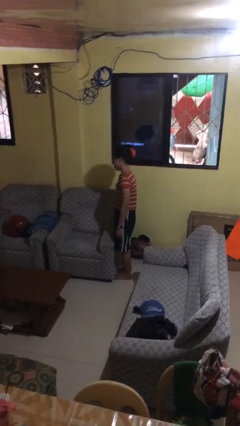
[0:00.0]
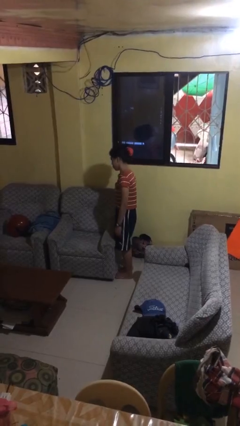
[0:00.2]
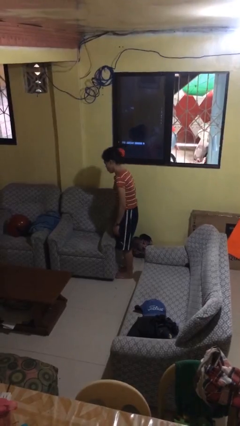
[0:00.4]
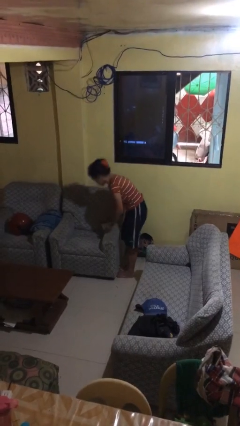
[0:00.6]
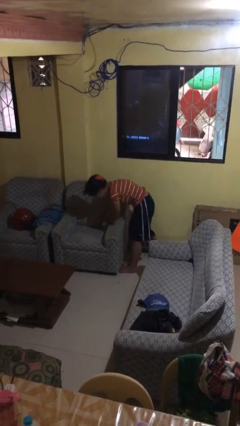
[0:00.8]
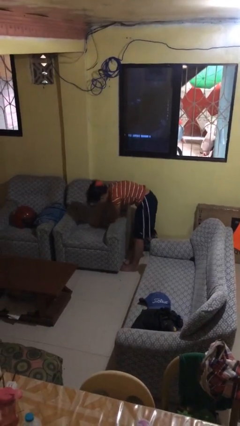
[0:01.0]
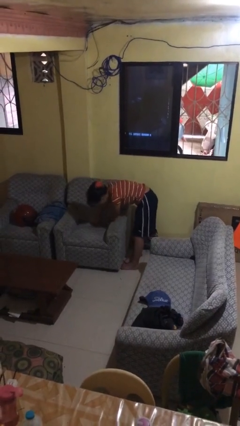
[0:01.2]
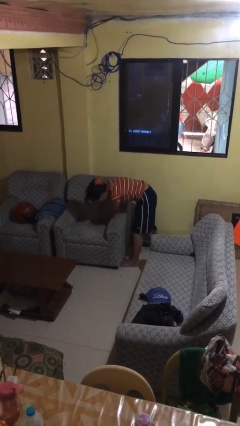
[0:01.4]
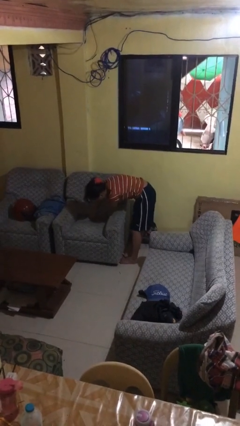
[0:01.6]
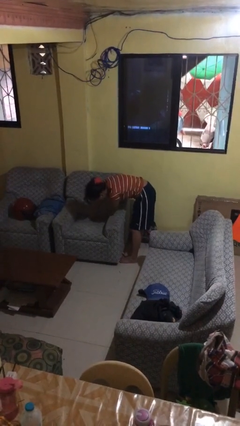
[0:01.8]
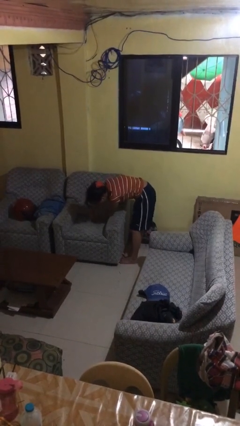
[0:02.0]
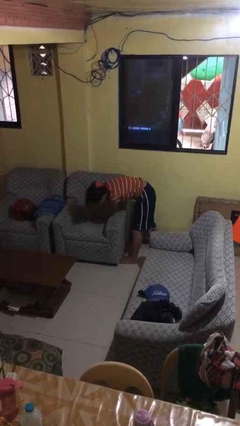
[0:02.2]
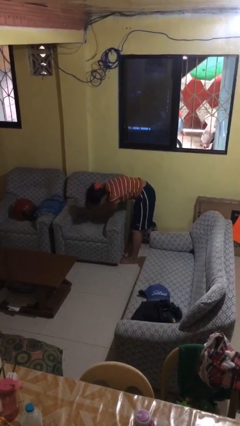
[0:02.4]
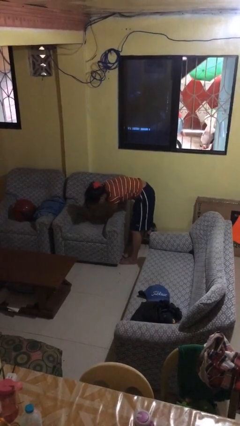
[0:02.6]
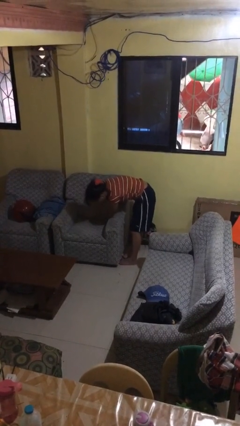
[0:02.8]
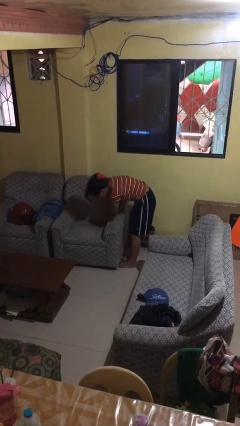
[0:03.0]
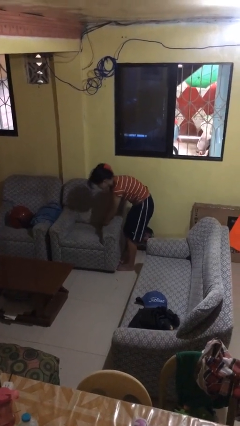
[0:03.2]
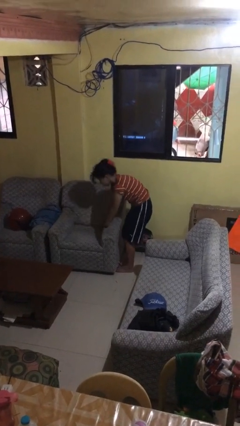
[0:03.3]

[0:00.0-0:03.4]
person searches in couch

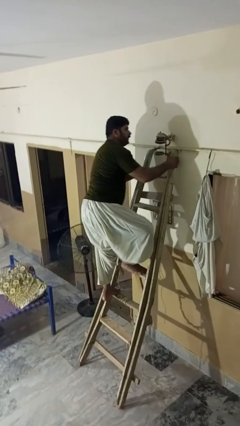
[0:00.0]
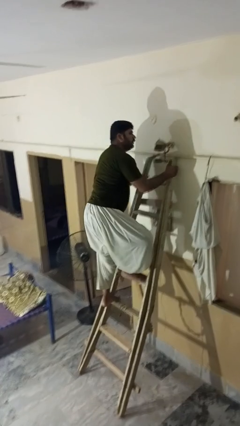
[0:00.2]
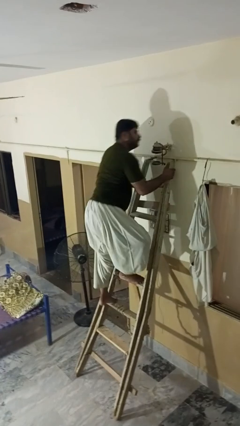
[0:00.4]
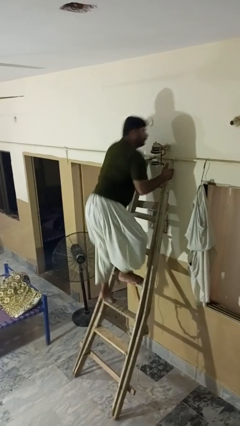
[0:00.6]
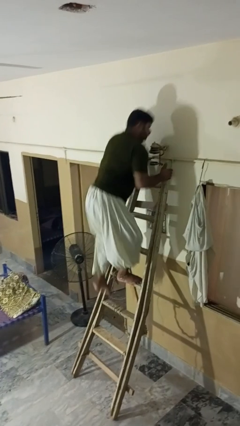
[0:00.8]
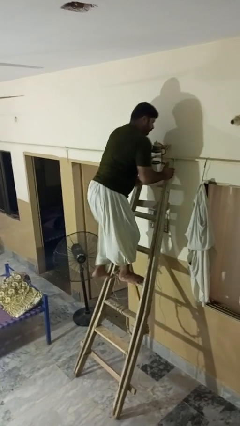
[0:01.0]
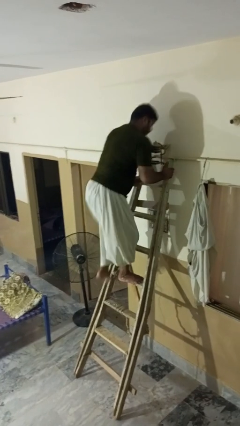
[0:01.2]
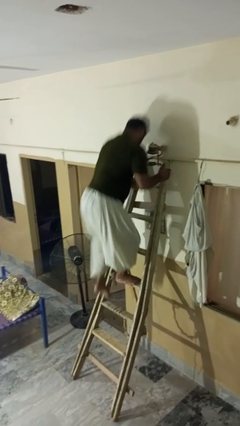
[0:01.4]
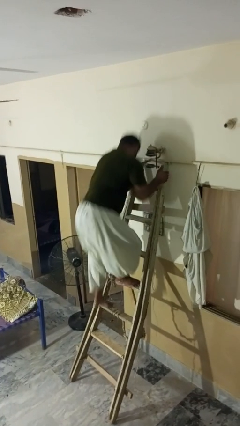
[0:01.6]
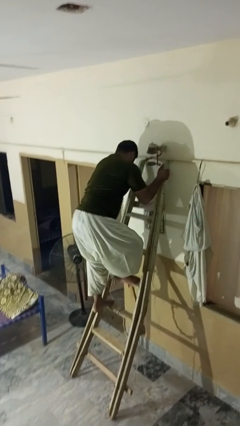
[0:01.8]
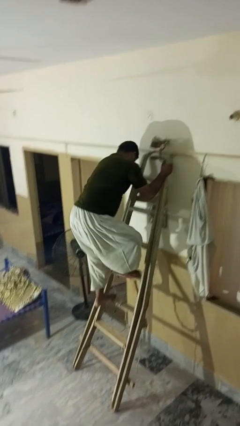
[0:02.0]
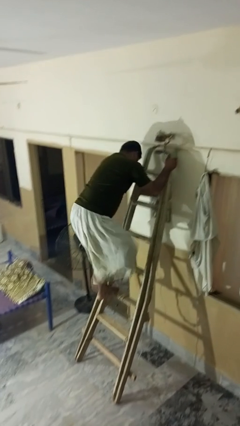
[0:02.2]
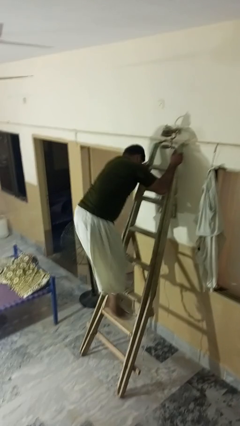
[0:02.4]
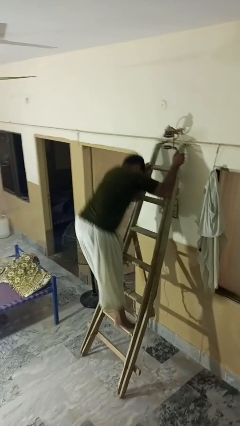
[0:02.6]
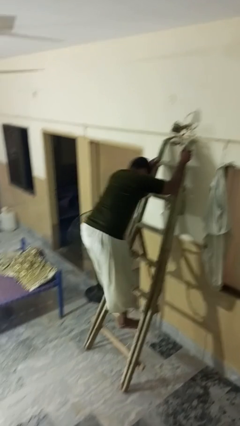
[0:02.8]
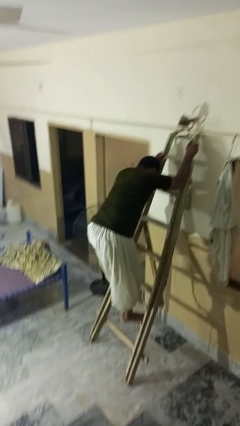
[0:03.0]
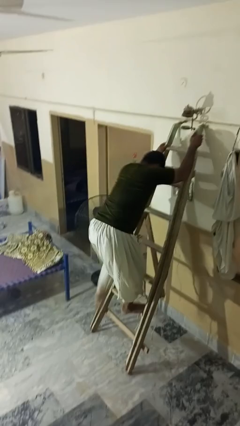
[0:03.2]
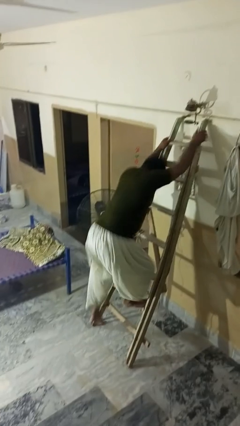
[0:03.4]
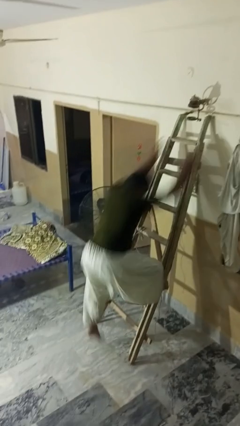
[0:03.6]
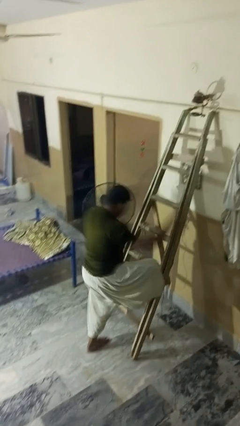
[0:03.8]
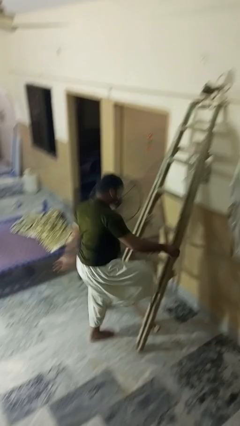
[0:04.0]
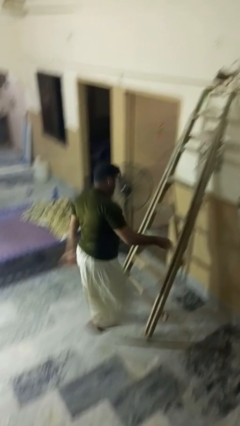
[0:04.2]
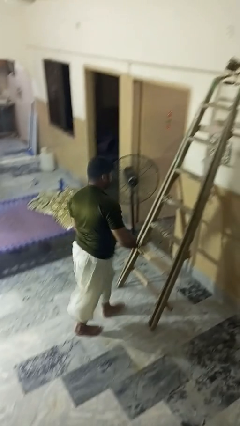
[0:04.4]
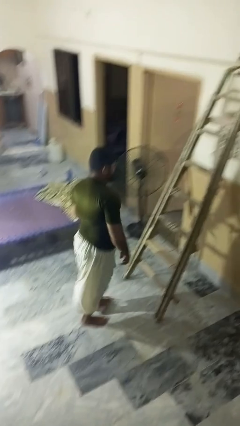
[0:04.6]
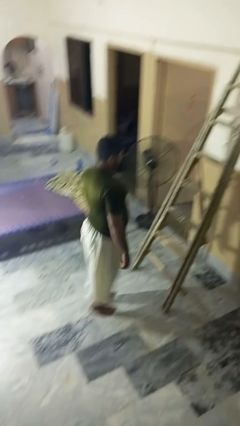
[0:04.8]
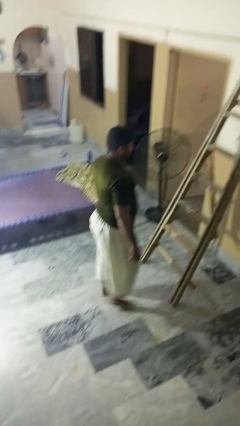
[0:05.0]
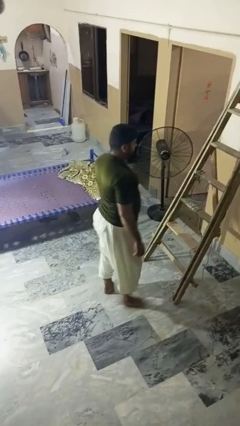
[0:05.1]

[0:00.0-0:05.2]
person climbs down ladder

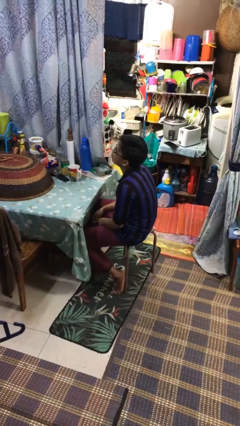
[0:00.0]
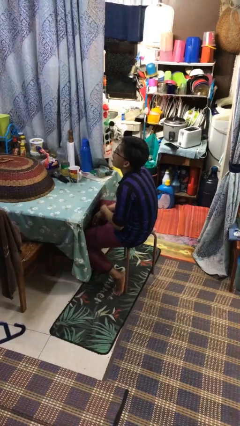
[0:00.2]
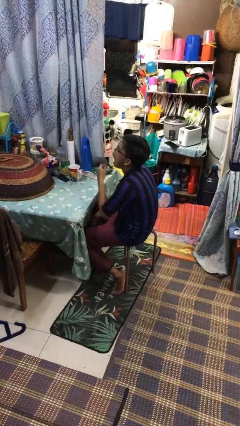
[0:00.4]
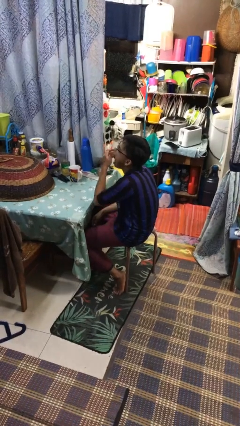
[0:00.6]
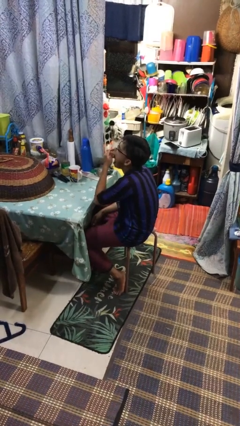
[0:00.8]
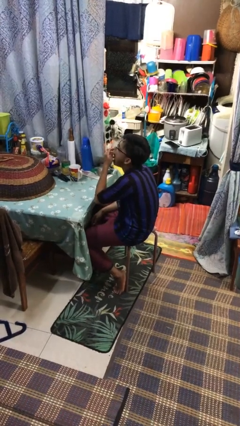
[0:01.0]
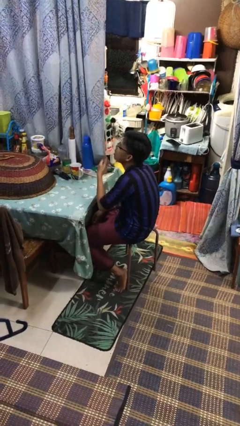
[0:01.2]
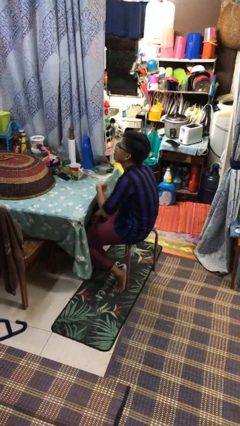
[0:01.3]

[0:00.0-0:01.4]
person yawns

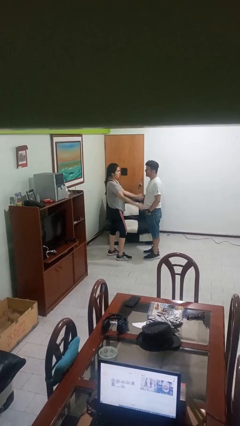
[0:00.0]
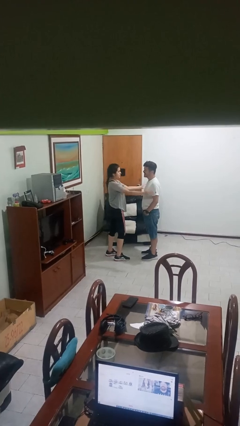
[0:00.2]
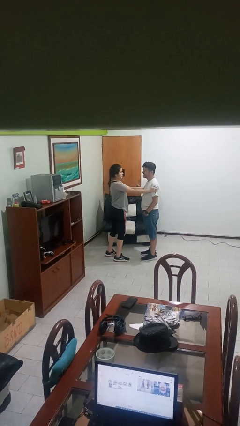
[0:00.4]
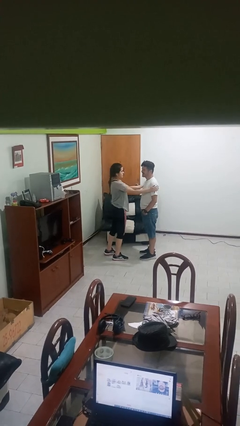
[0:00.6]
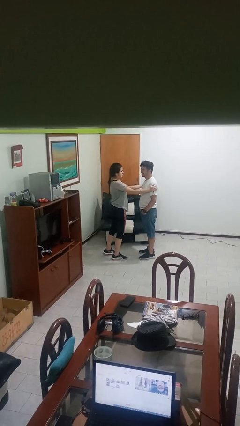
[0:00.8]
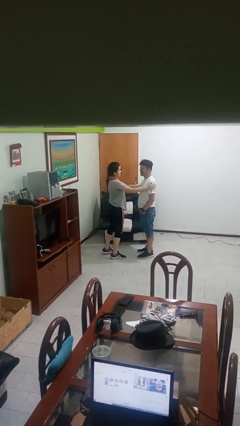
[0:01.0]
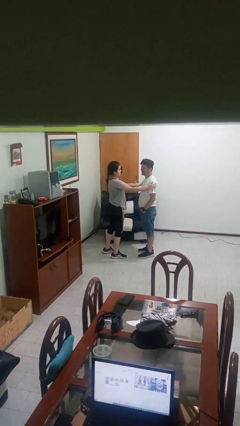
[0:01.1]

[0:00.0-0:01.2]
person pounds shoulders of person

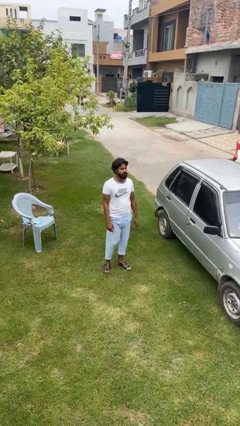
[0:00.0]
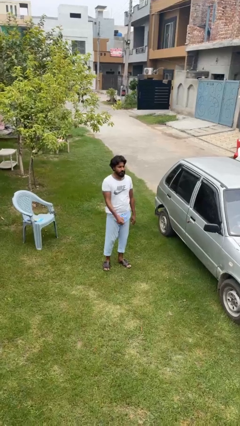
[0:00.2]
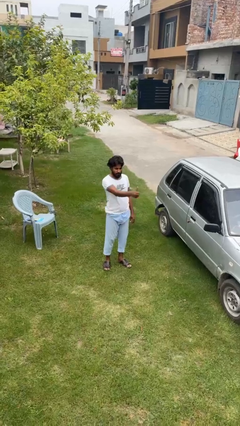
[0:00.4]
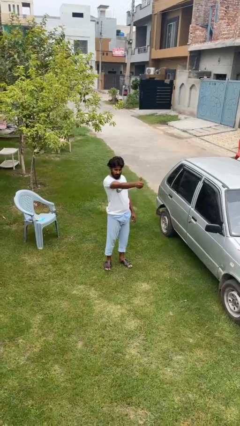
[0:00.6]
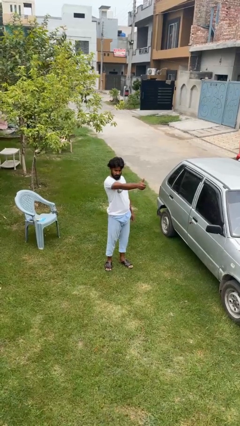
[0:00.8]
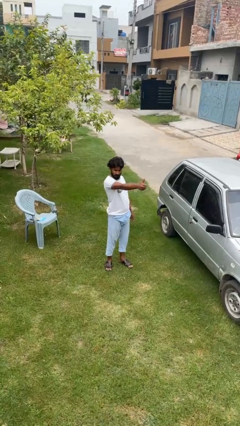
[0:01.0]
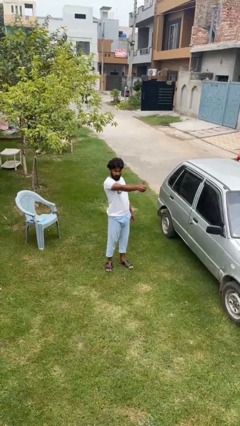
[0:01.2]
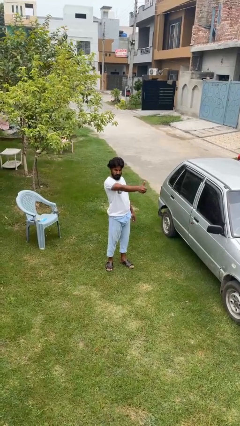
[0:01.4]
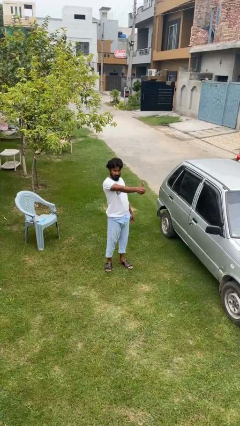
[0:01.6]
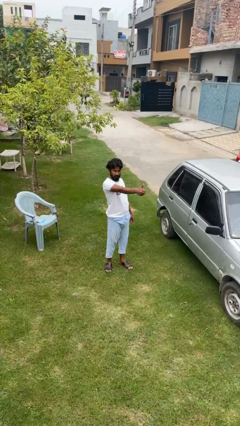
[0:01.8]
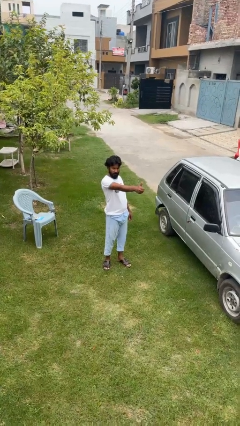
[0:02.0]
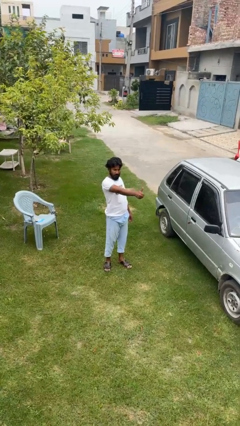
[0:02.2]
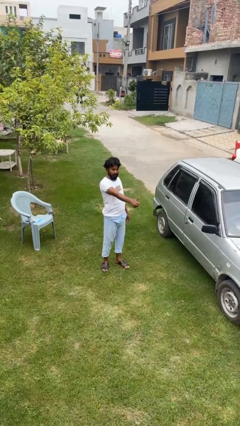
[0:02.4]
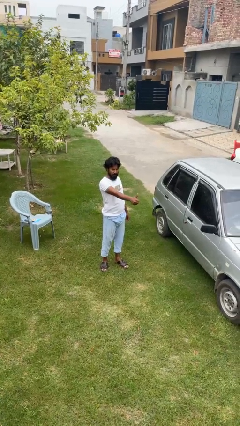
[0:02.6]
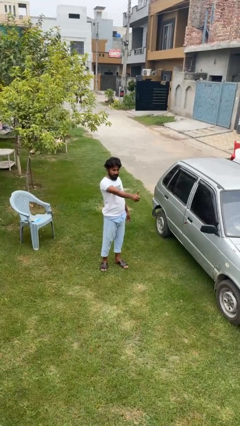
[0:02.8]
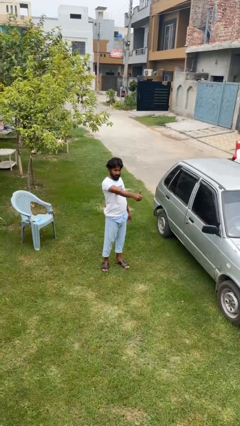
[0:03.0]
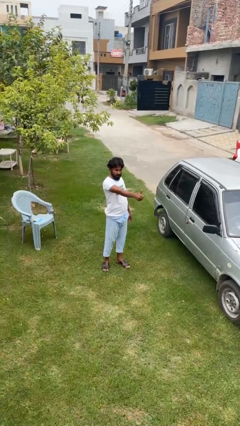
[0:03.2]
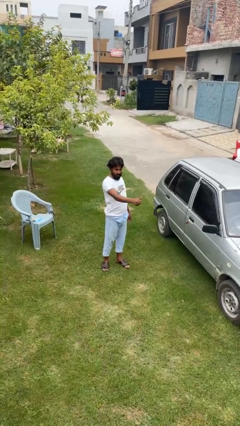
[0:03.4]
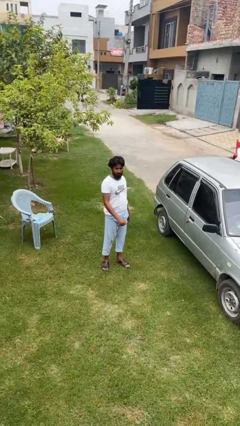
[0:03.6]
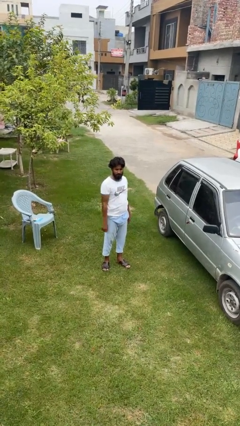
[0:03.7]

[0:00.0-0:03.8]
person gestures thumbs up

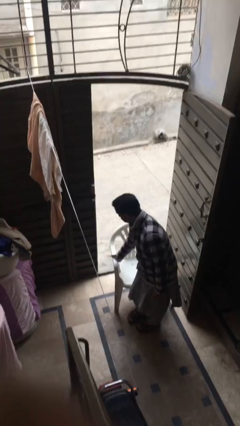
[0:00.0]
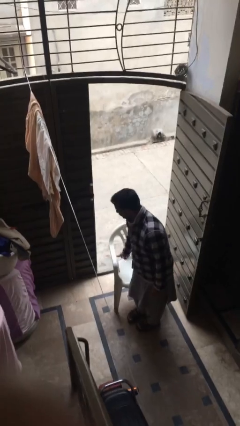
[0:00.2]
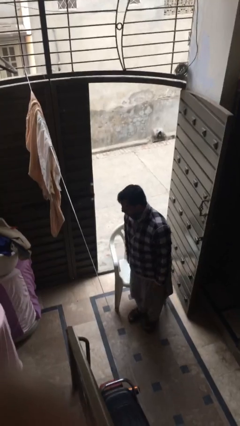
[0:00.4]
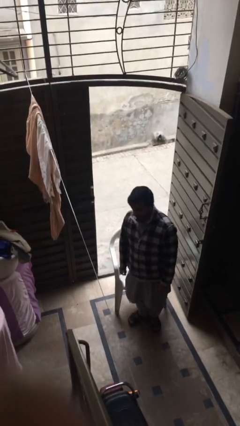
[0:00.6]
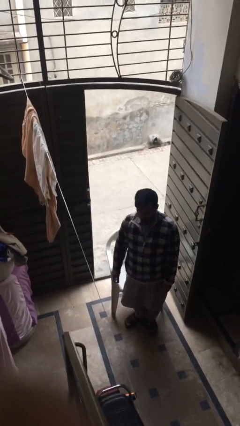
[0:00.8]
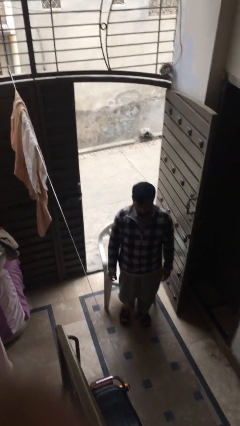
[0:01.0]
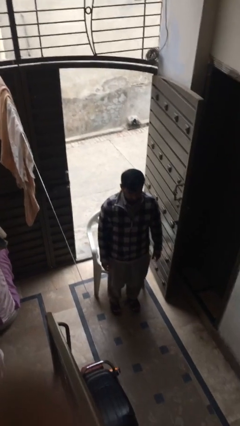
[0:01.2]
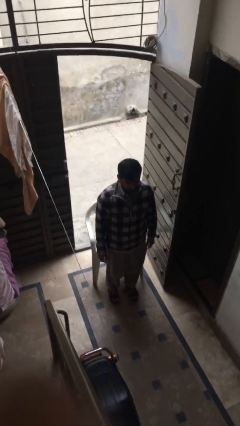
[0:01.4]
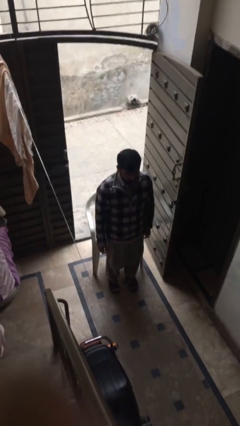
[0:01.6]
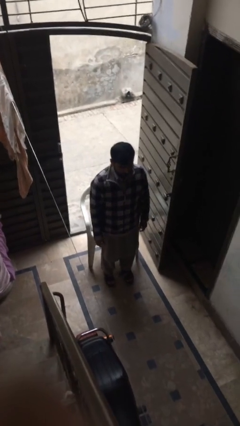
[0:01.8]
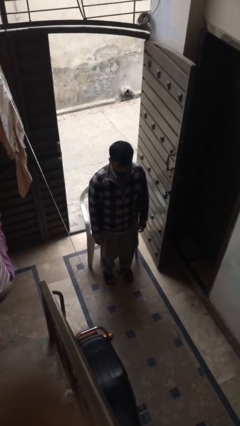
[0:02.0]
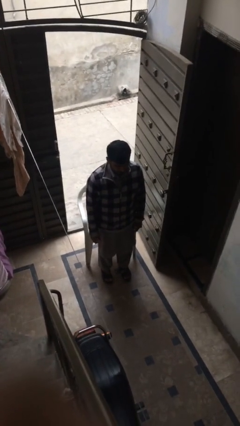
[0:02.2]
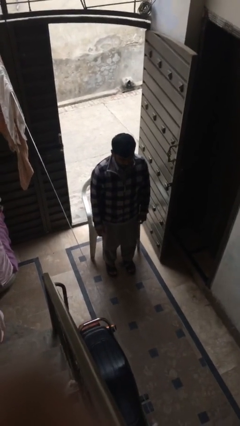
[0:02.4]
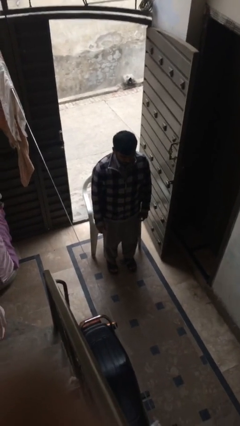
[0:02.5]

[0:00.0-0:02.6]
person stands up
